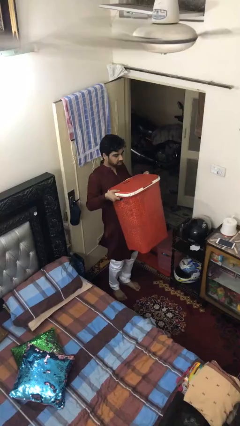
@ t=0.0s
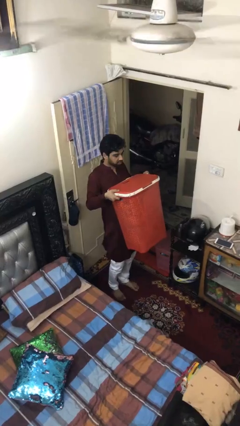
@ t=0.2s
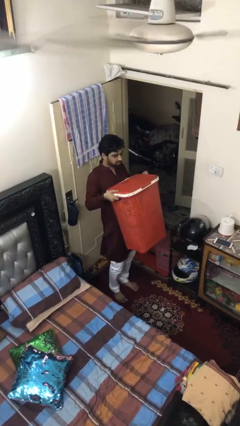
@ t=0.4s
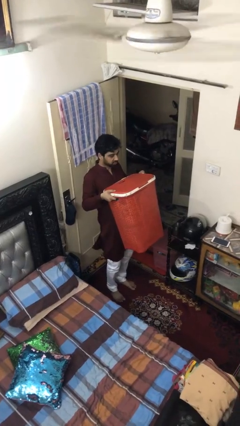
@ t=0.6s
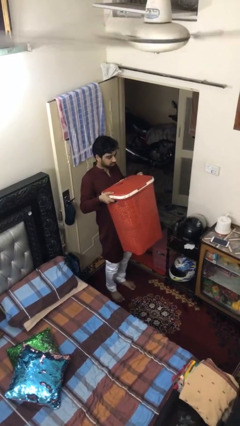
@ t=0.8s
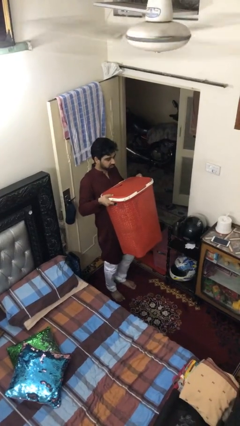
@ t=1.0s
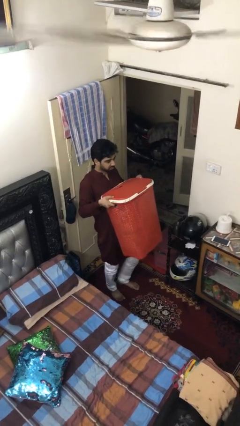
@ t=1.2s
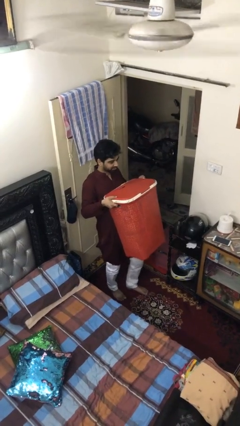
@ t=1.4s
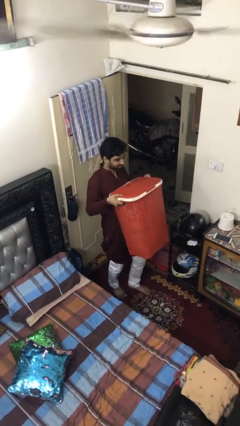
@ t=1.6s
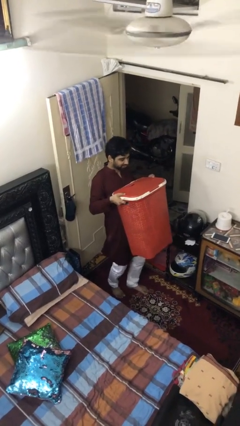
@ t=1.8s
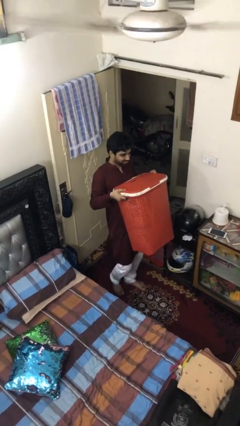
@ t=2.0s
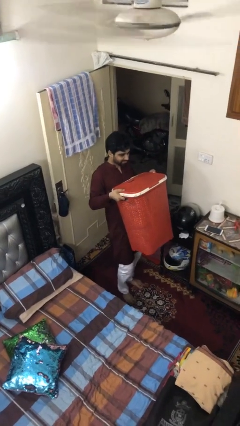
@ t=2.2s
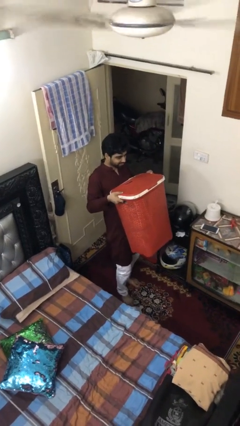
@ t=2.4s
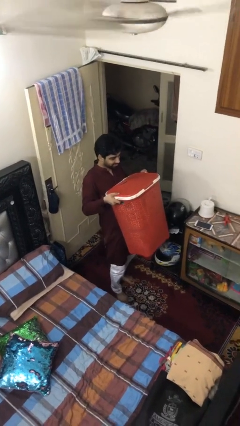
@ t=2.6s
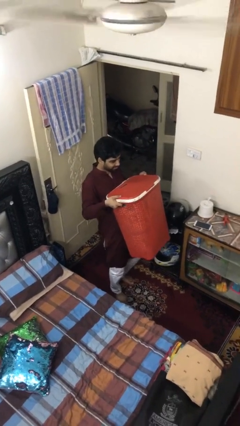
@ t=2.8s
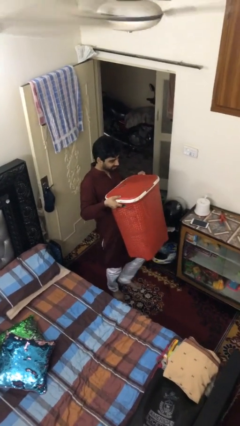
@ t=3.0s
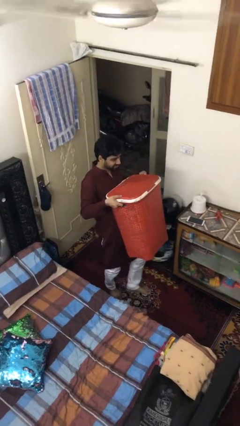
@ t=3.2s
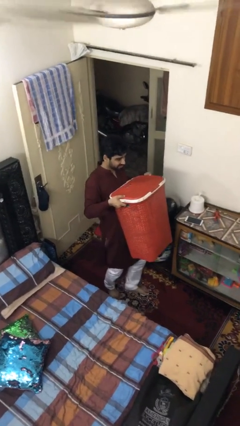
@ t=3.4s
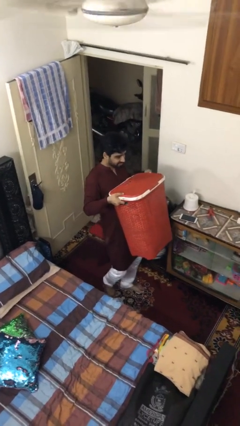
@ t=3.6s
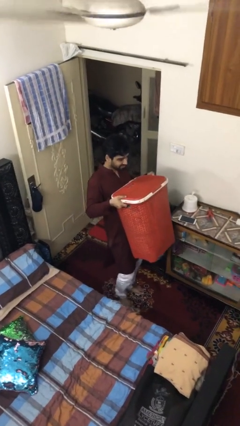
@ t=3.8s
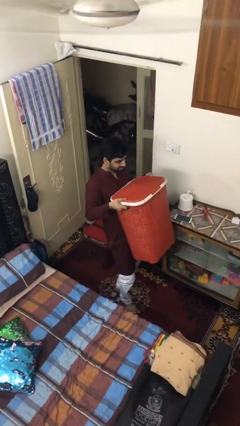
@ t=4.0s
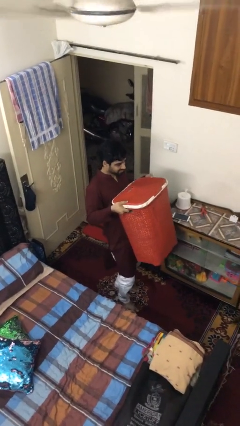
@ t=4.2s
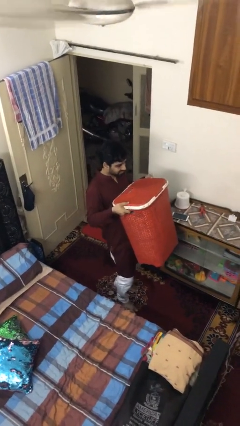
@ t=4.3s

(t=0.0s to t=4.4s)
person carries heavy object

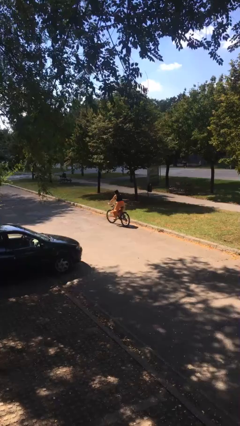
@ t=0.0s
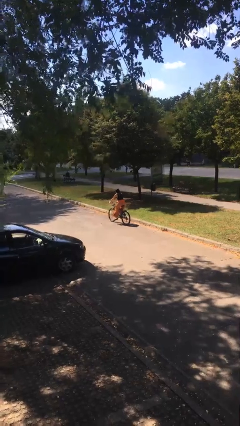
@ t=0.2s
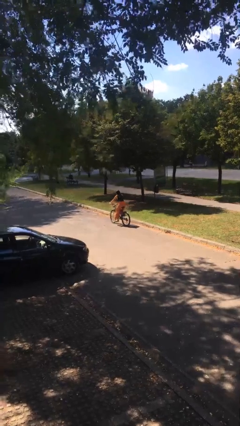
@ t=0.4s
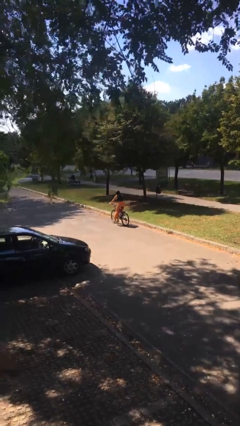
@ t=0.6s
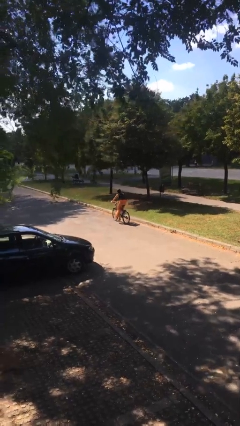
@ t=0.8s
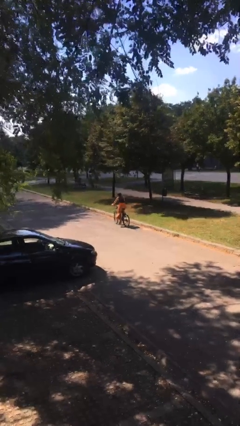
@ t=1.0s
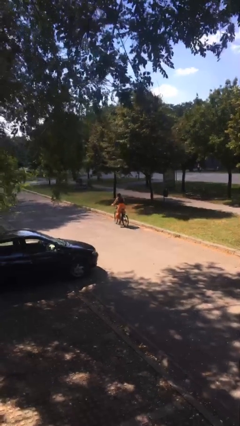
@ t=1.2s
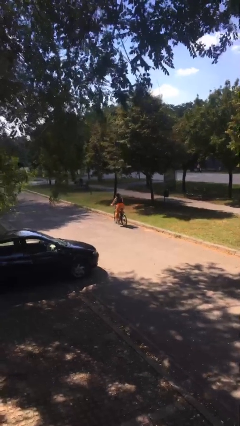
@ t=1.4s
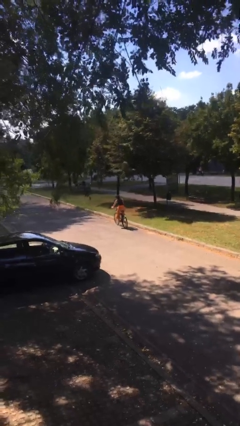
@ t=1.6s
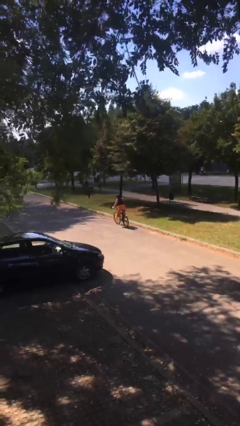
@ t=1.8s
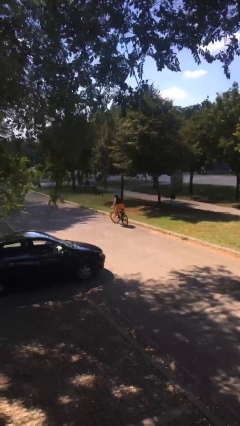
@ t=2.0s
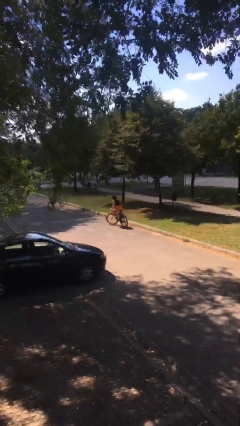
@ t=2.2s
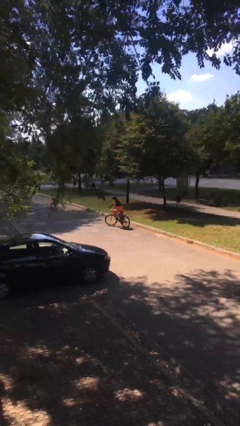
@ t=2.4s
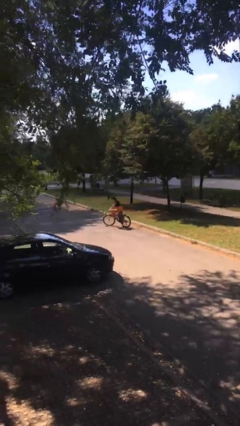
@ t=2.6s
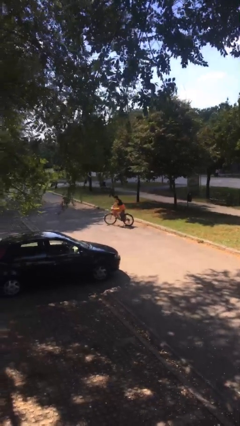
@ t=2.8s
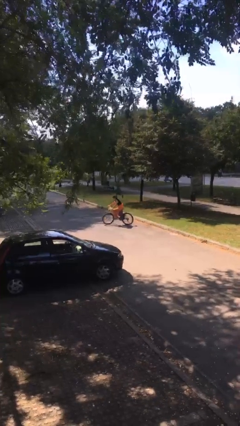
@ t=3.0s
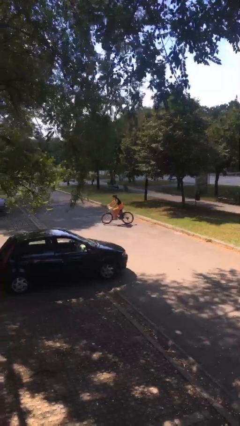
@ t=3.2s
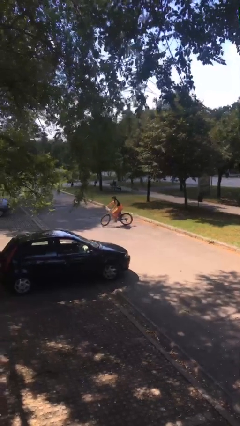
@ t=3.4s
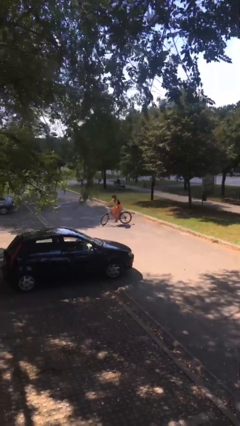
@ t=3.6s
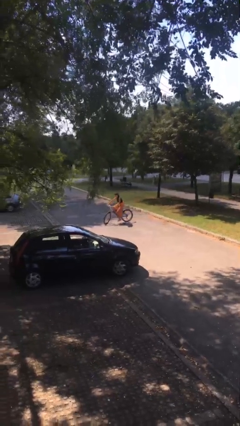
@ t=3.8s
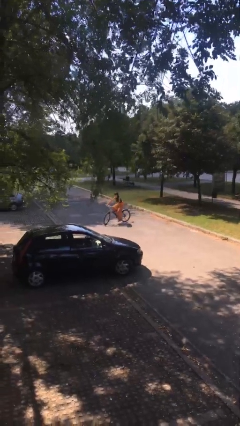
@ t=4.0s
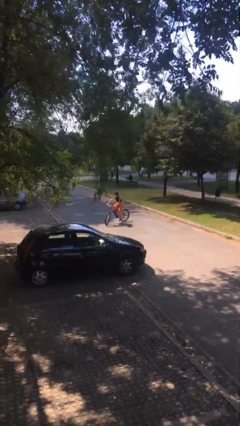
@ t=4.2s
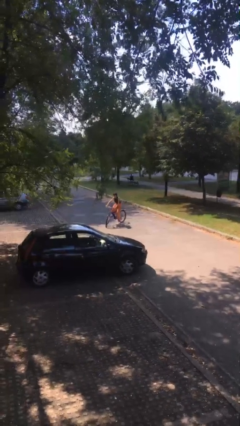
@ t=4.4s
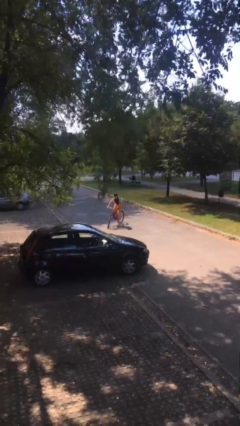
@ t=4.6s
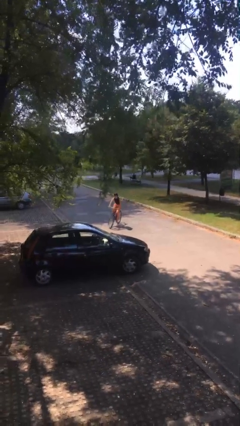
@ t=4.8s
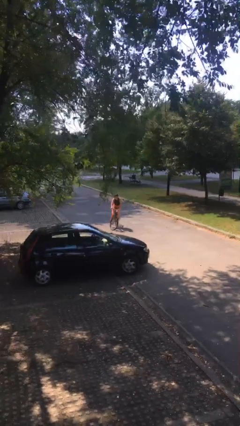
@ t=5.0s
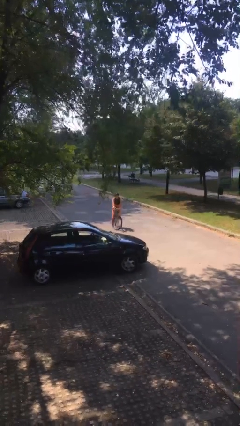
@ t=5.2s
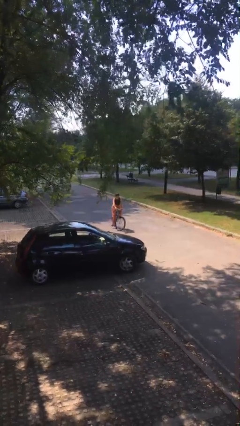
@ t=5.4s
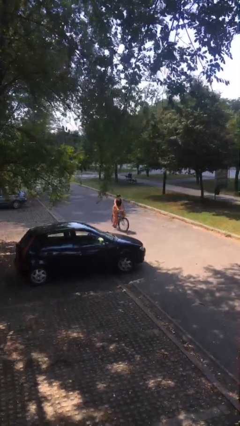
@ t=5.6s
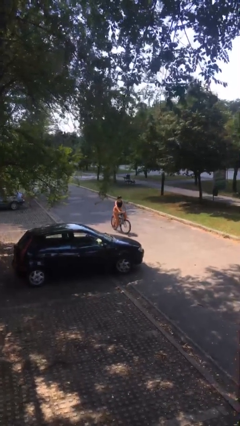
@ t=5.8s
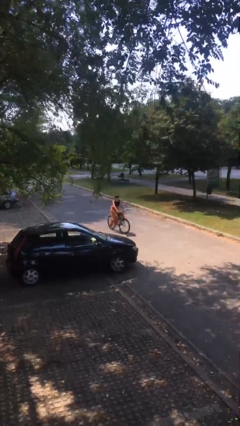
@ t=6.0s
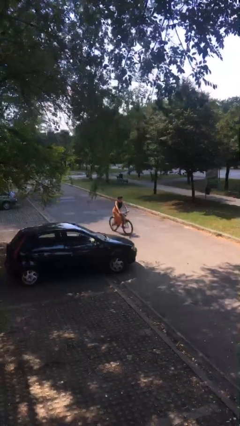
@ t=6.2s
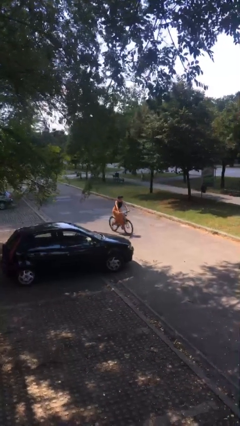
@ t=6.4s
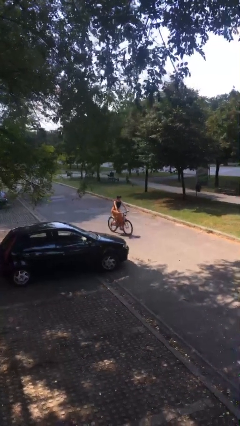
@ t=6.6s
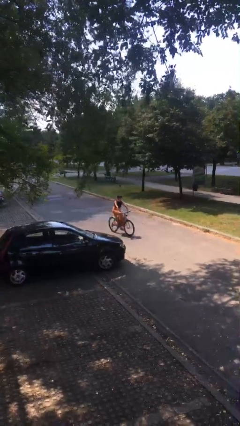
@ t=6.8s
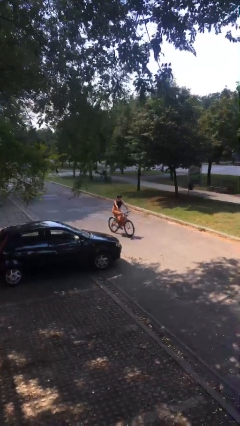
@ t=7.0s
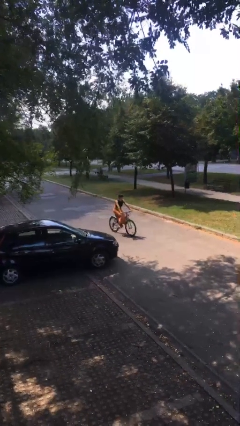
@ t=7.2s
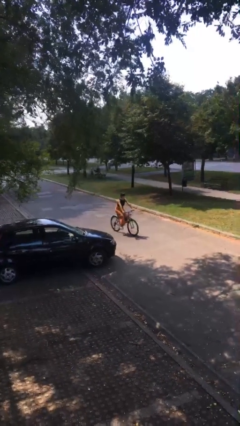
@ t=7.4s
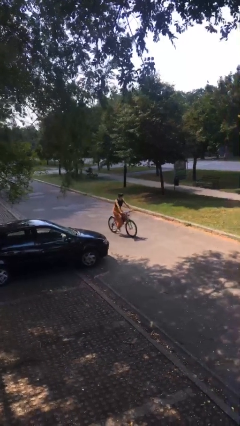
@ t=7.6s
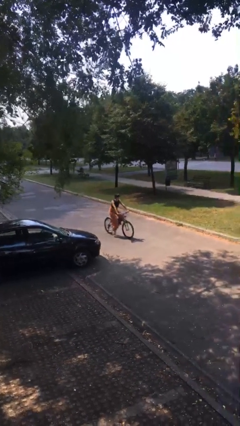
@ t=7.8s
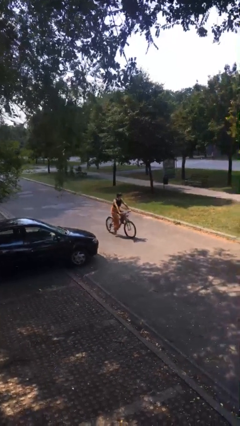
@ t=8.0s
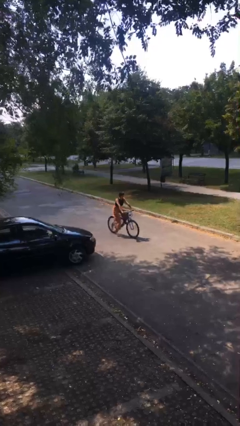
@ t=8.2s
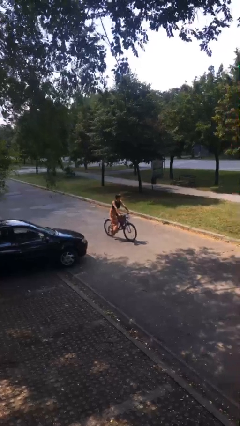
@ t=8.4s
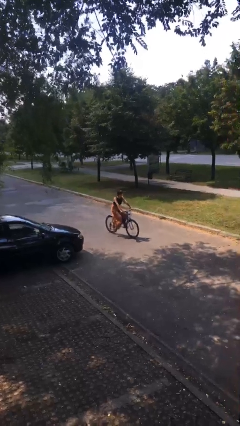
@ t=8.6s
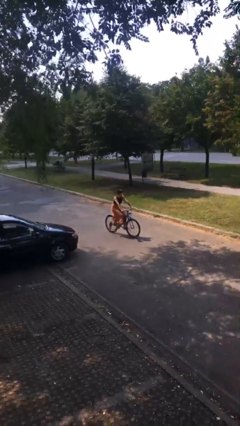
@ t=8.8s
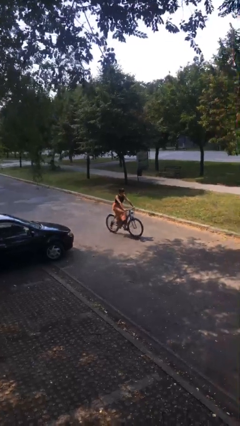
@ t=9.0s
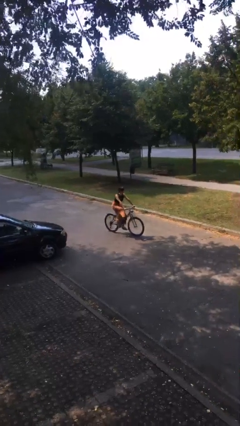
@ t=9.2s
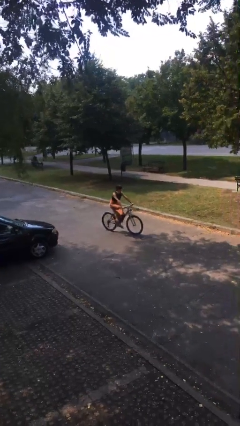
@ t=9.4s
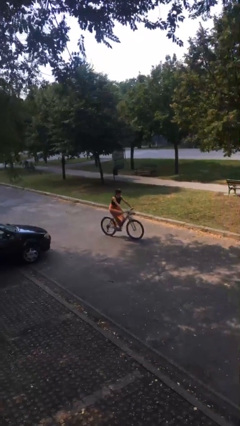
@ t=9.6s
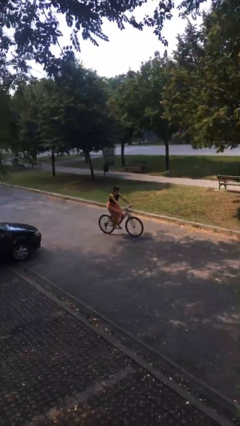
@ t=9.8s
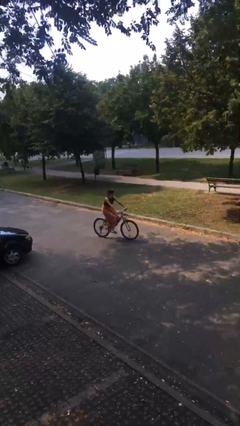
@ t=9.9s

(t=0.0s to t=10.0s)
person rides bicycle

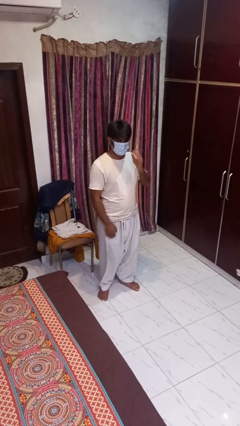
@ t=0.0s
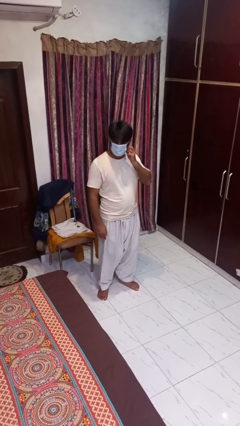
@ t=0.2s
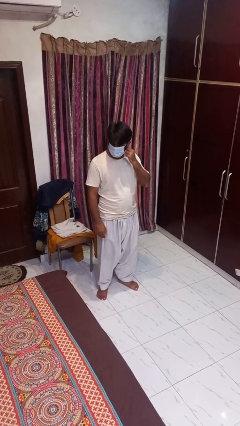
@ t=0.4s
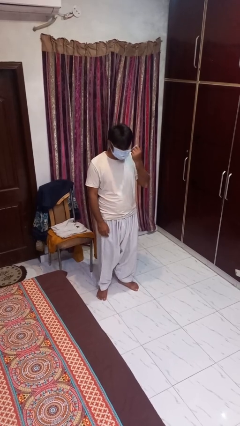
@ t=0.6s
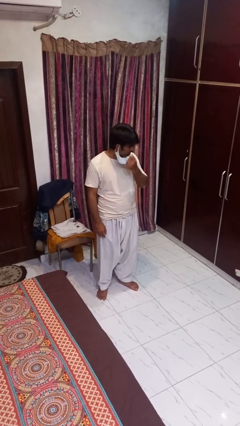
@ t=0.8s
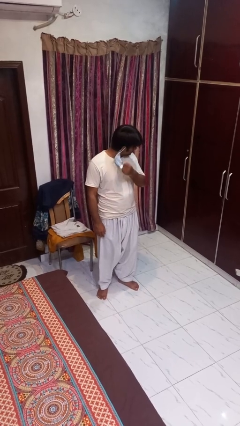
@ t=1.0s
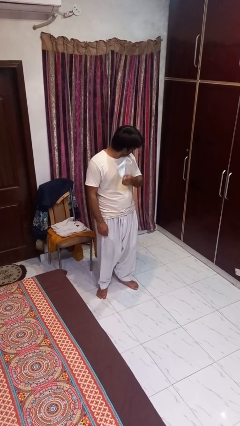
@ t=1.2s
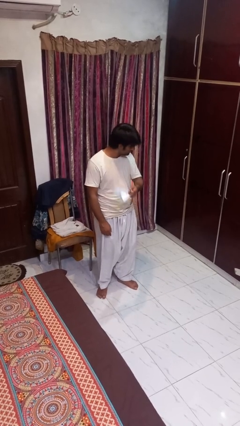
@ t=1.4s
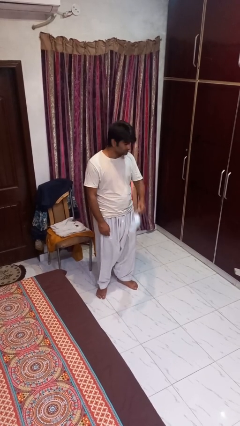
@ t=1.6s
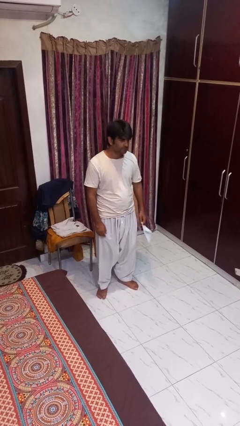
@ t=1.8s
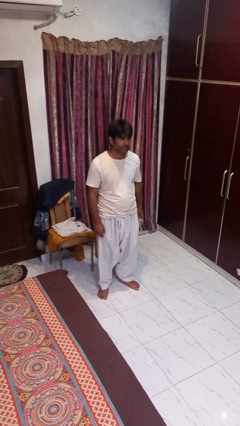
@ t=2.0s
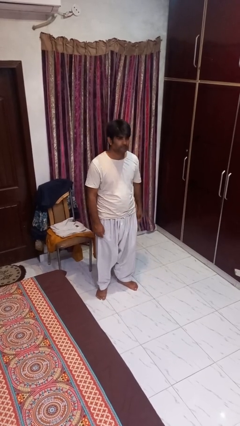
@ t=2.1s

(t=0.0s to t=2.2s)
person takes off facemask

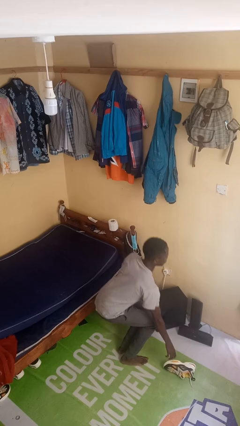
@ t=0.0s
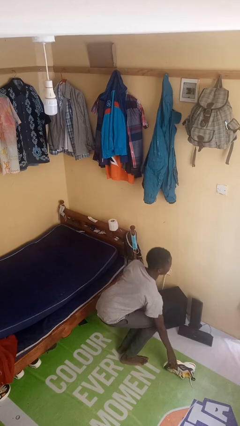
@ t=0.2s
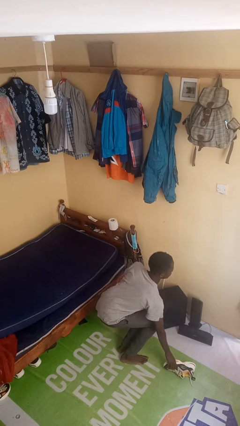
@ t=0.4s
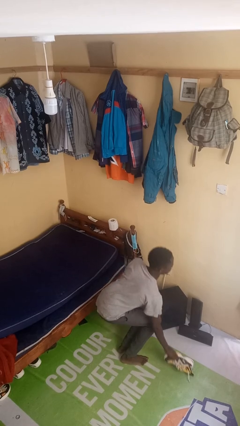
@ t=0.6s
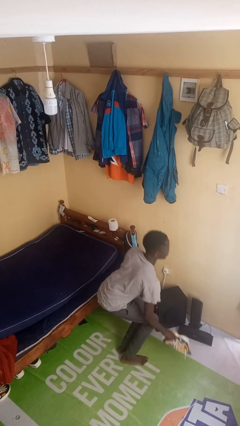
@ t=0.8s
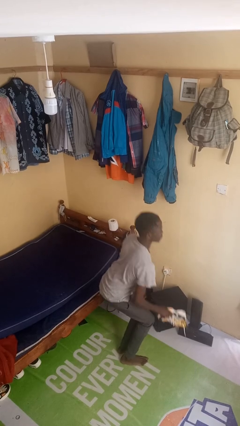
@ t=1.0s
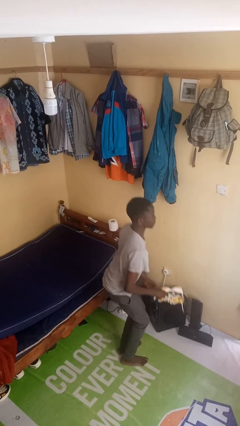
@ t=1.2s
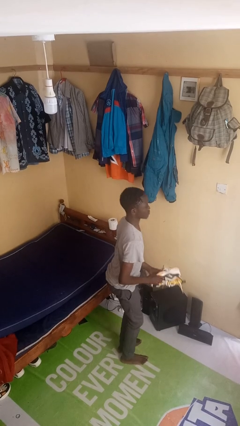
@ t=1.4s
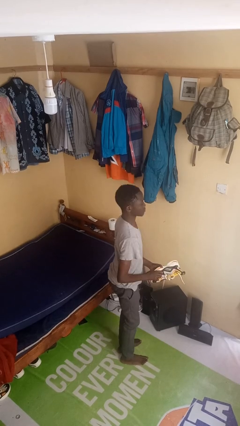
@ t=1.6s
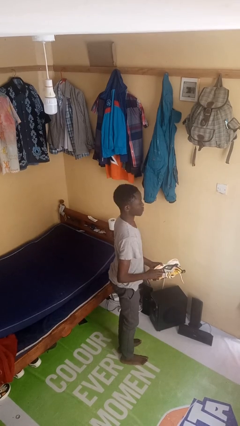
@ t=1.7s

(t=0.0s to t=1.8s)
person picks up object from floor
